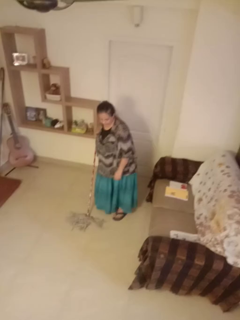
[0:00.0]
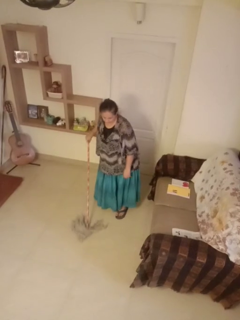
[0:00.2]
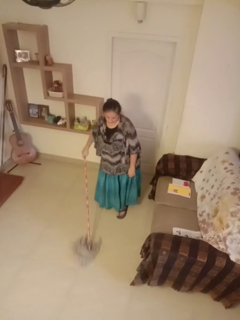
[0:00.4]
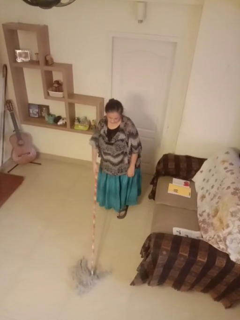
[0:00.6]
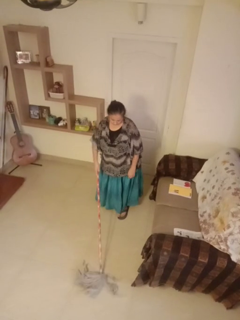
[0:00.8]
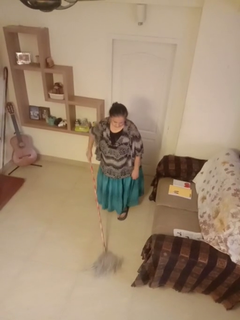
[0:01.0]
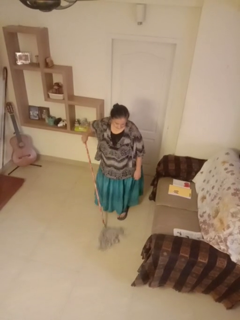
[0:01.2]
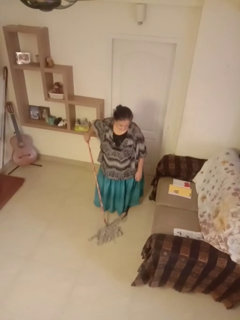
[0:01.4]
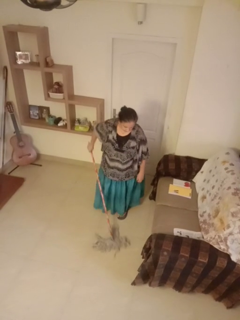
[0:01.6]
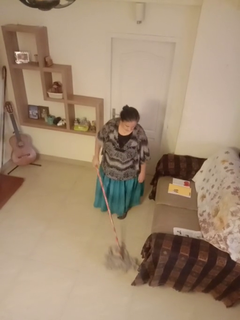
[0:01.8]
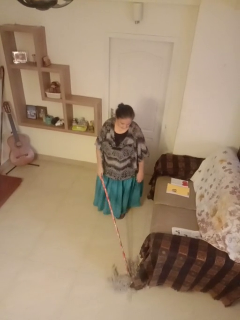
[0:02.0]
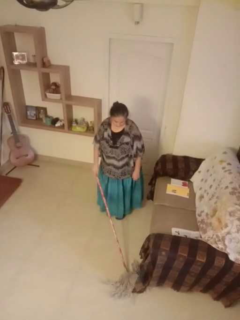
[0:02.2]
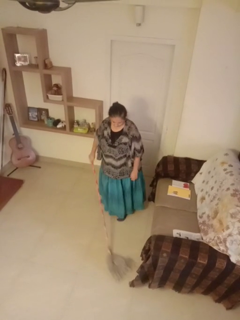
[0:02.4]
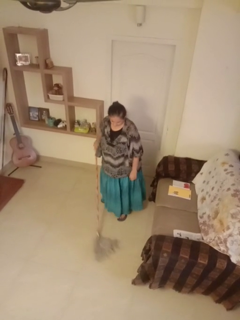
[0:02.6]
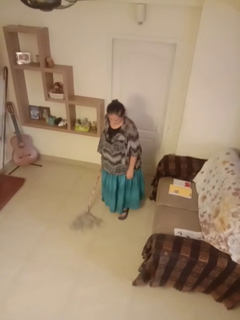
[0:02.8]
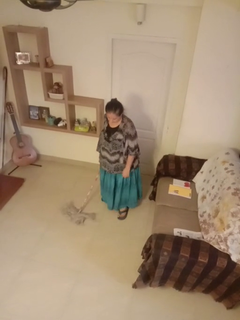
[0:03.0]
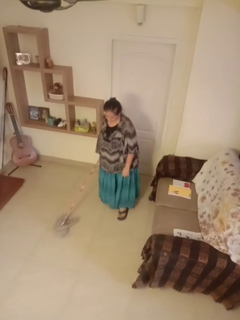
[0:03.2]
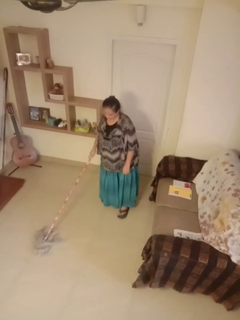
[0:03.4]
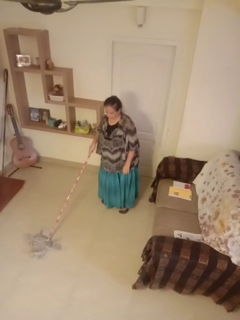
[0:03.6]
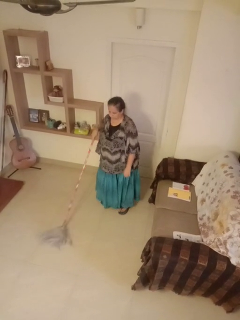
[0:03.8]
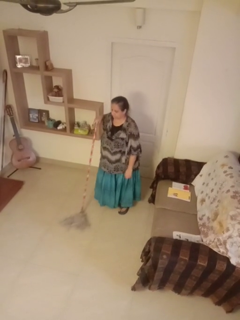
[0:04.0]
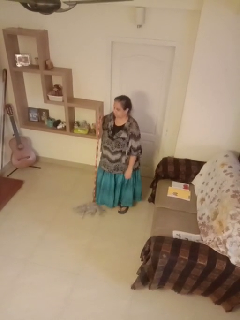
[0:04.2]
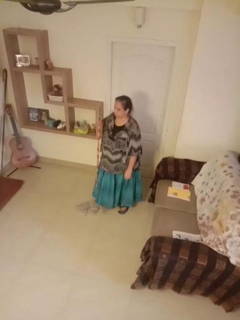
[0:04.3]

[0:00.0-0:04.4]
person mops

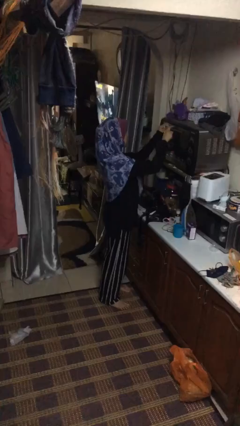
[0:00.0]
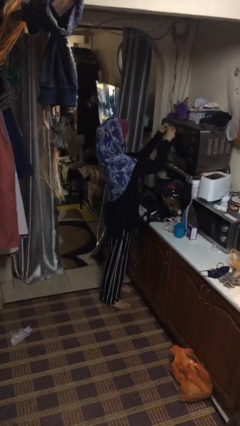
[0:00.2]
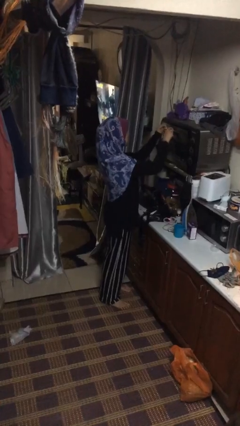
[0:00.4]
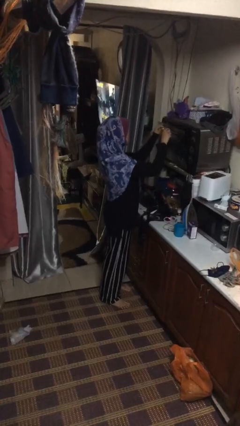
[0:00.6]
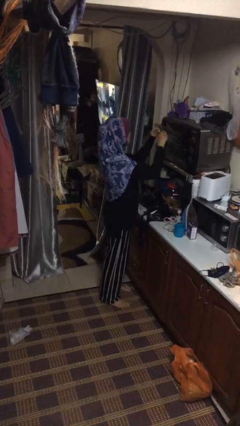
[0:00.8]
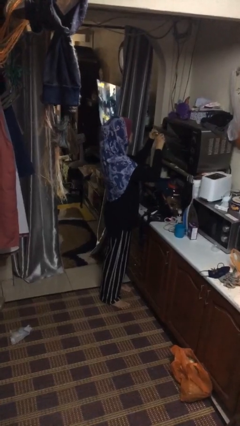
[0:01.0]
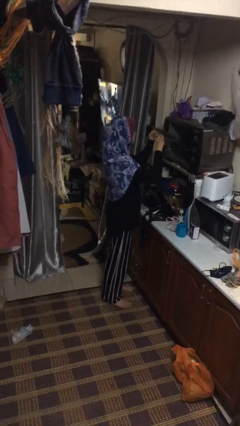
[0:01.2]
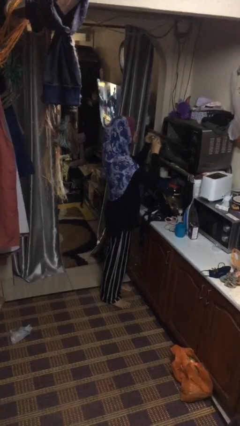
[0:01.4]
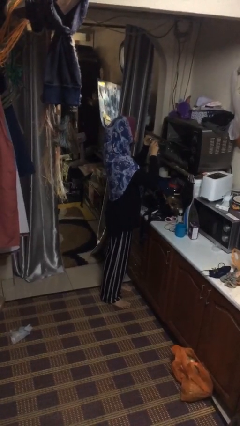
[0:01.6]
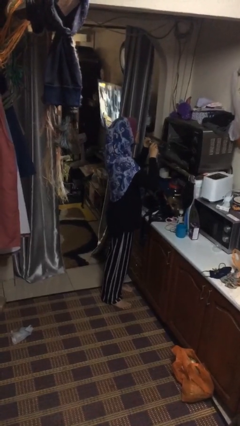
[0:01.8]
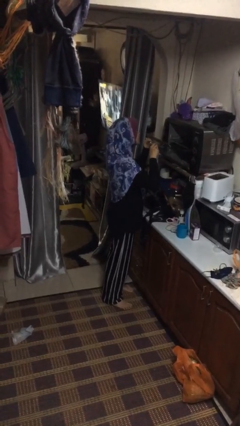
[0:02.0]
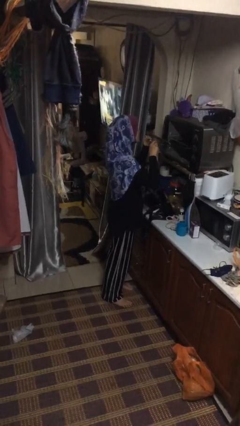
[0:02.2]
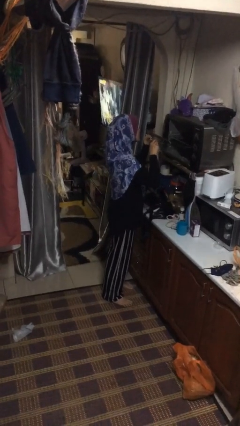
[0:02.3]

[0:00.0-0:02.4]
person opens oven door

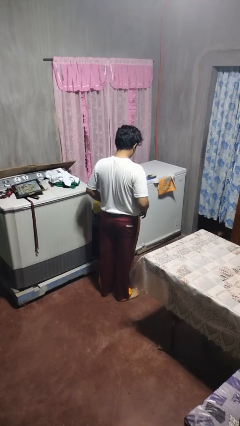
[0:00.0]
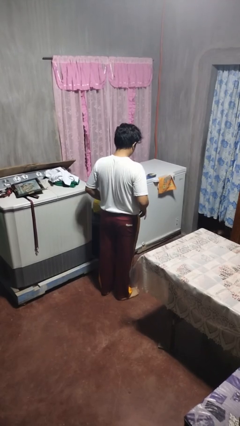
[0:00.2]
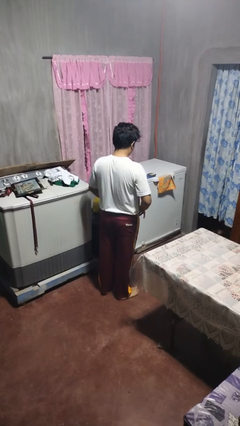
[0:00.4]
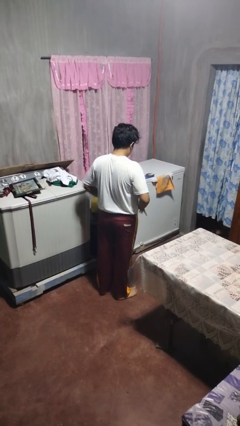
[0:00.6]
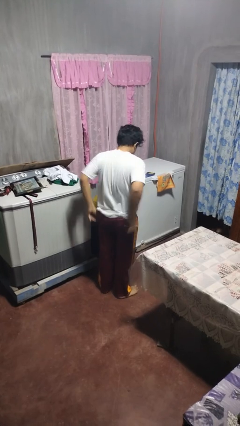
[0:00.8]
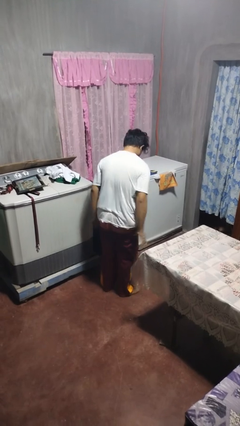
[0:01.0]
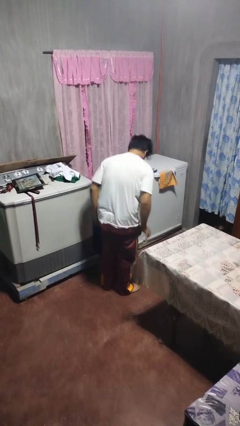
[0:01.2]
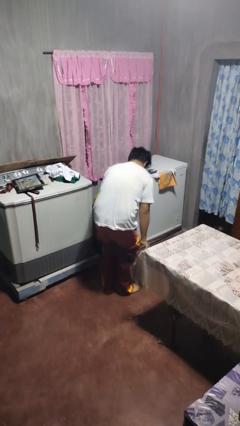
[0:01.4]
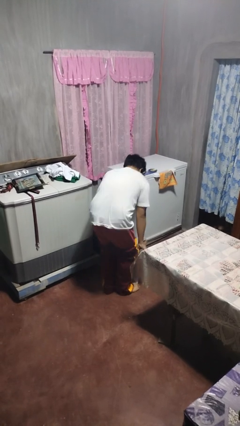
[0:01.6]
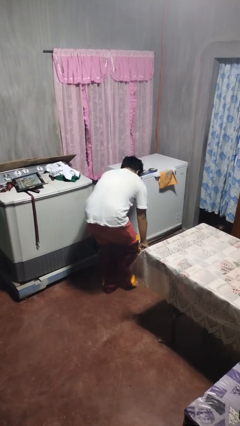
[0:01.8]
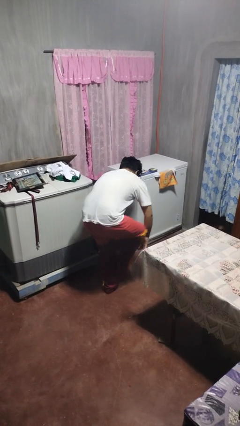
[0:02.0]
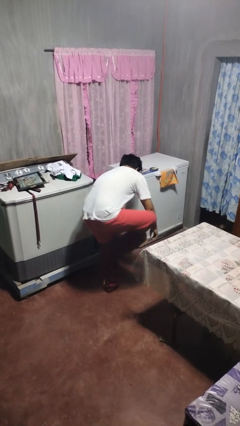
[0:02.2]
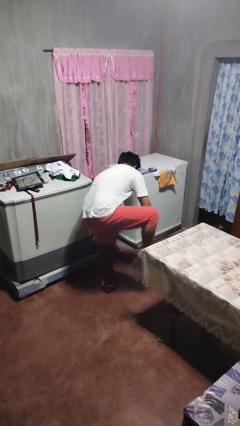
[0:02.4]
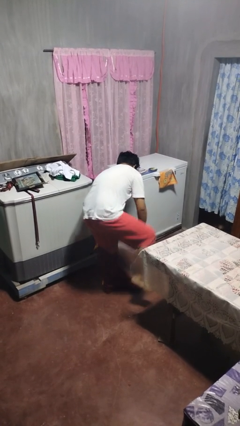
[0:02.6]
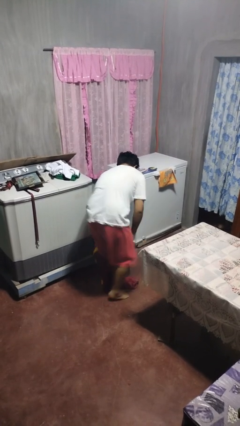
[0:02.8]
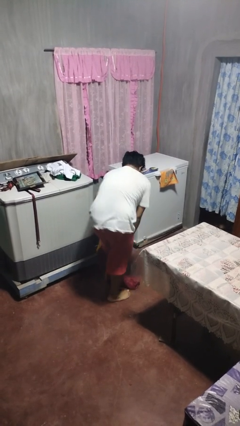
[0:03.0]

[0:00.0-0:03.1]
person takes off pants

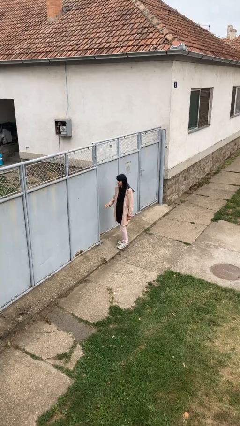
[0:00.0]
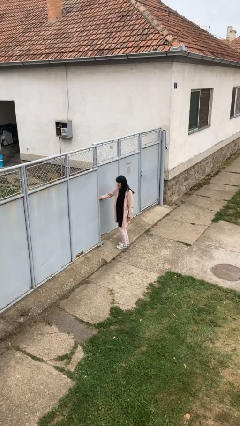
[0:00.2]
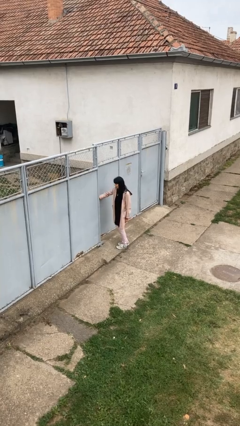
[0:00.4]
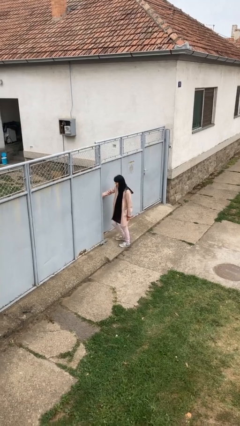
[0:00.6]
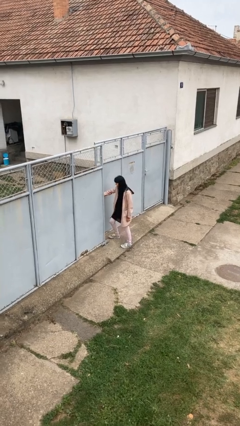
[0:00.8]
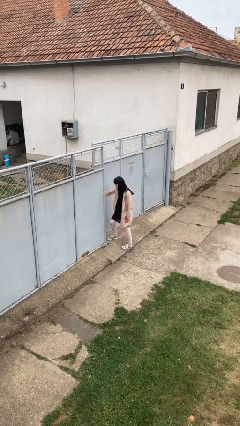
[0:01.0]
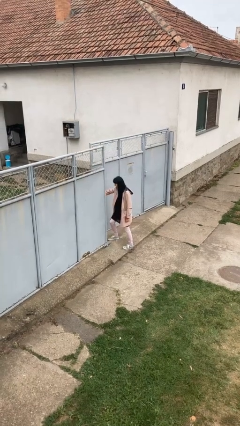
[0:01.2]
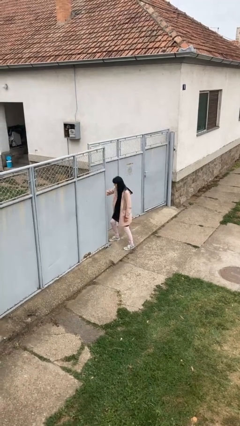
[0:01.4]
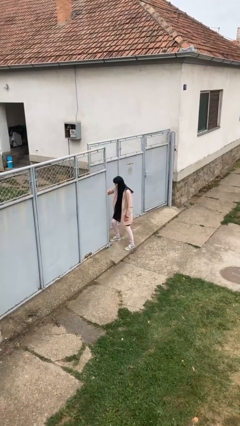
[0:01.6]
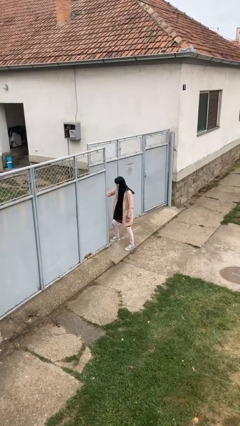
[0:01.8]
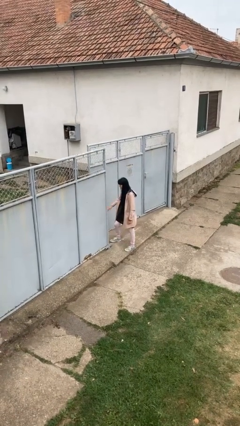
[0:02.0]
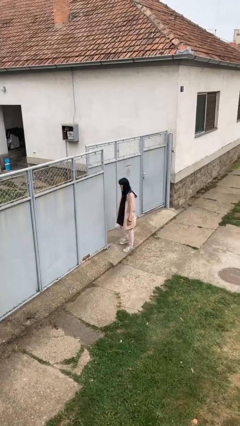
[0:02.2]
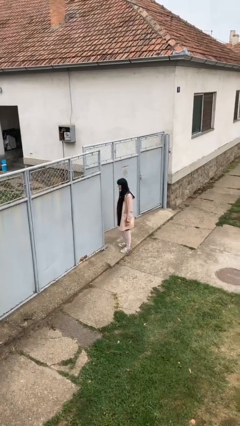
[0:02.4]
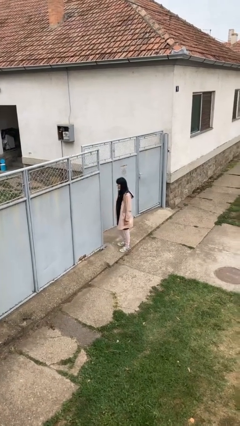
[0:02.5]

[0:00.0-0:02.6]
person opens gate

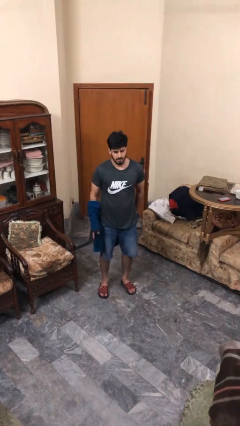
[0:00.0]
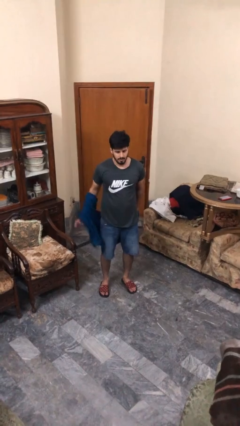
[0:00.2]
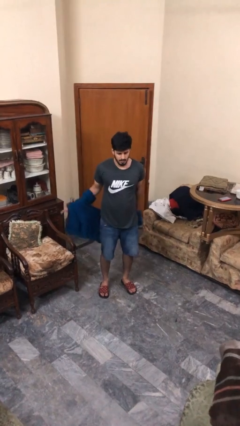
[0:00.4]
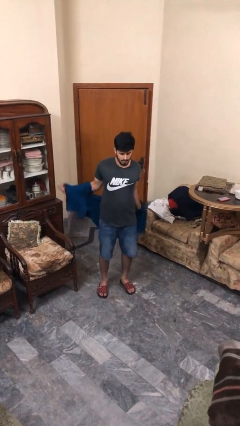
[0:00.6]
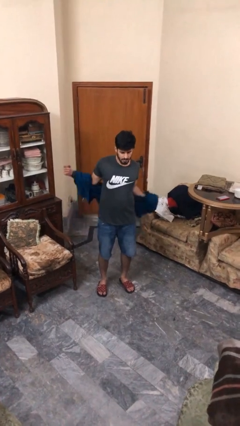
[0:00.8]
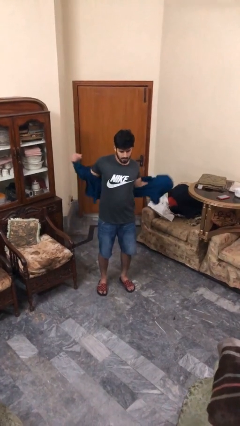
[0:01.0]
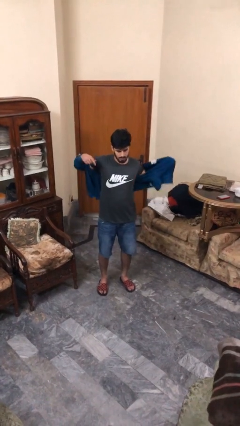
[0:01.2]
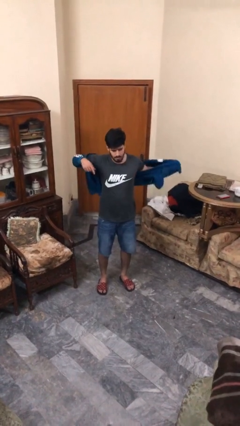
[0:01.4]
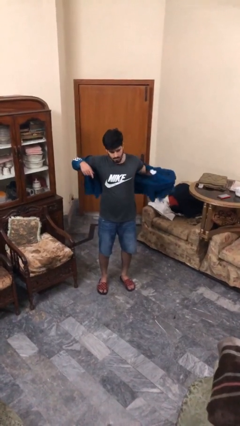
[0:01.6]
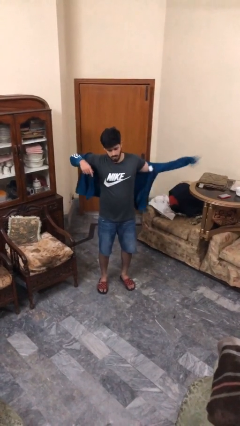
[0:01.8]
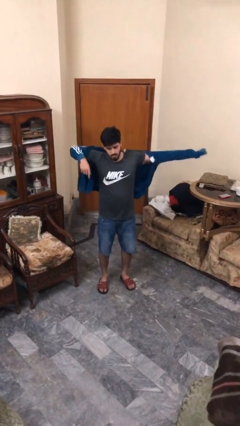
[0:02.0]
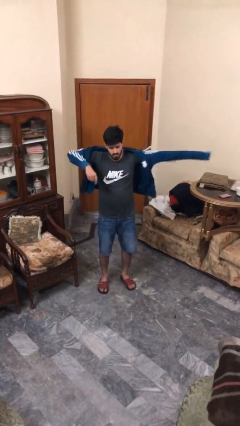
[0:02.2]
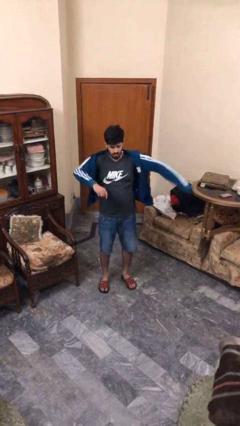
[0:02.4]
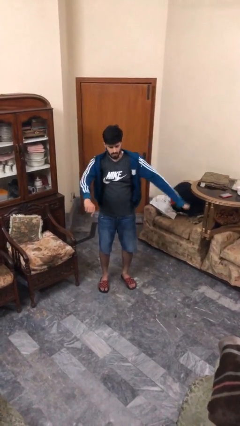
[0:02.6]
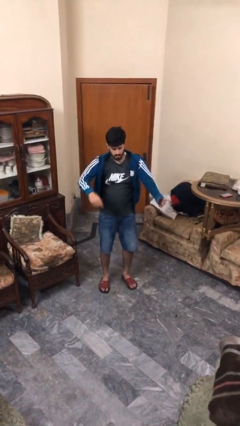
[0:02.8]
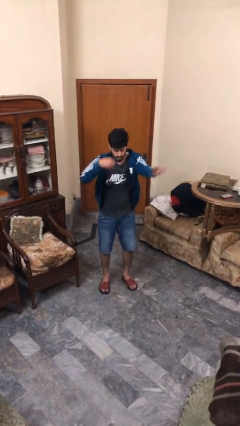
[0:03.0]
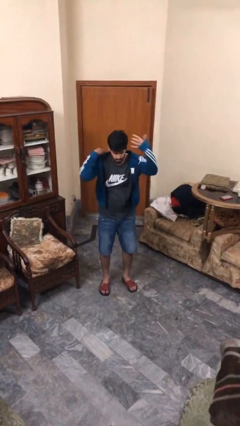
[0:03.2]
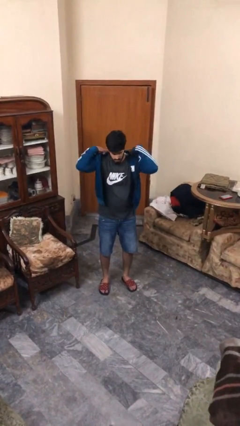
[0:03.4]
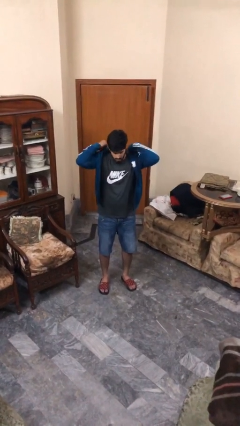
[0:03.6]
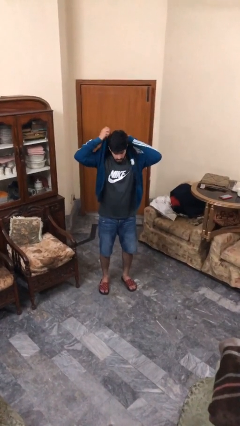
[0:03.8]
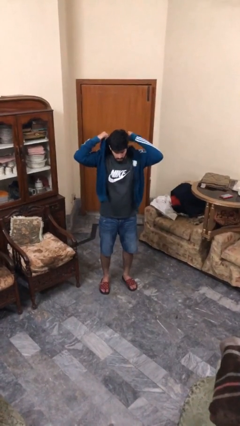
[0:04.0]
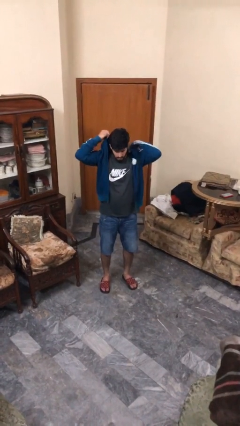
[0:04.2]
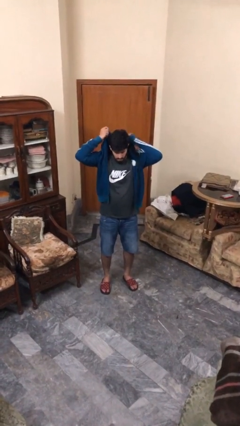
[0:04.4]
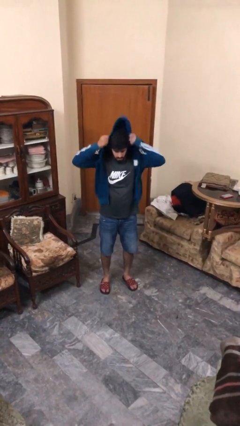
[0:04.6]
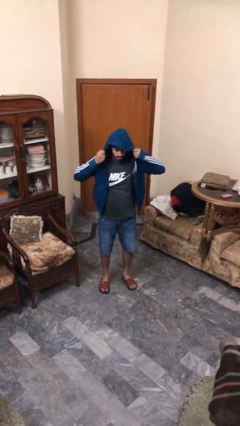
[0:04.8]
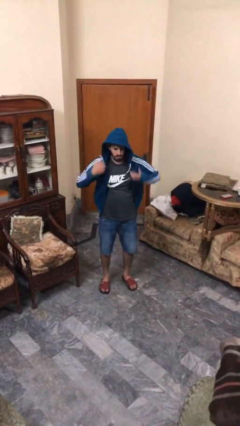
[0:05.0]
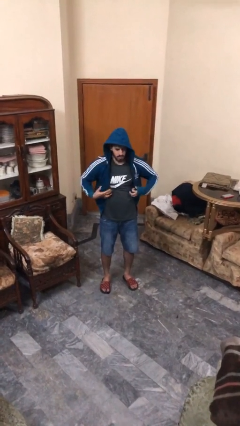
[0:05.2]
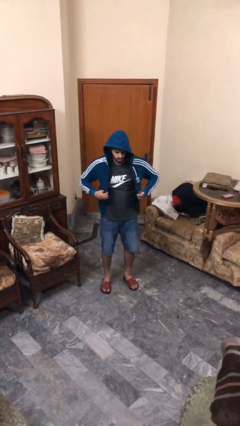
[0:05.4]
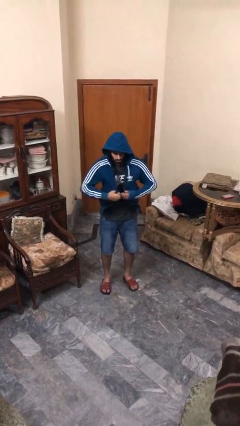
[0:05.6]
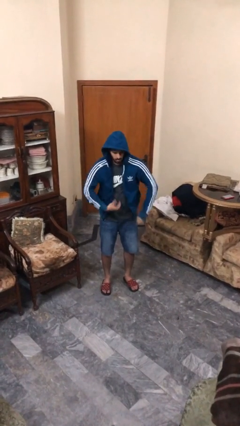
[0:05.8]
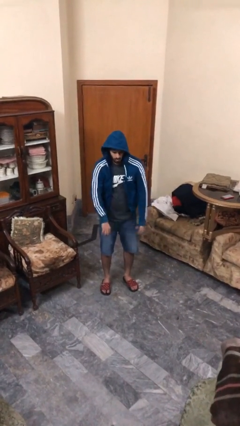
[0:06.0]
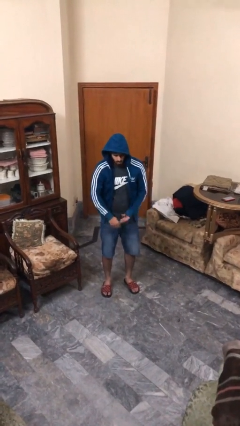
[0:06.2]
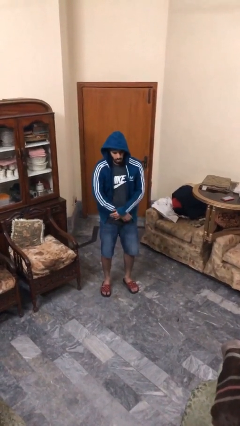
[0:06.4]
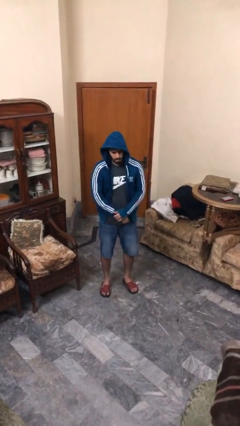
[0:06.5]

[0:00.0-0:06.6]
person puts on hoodie
